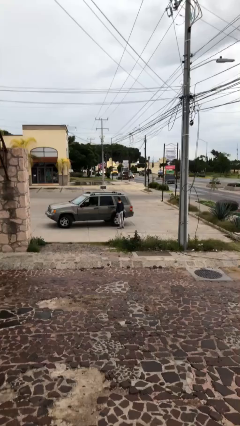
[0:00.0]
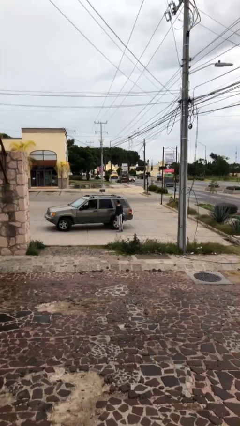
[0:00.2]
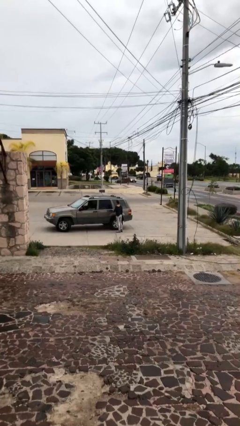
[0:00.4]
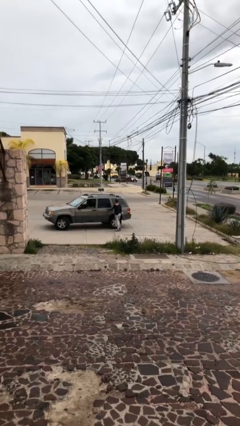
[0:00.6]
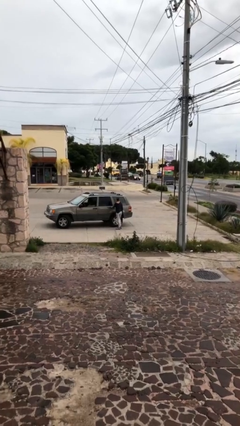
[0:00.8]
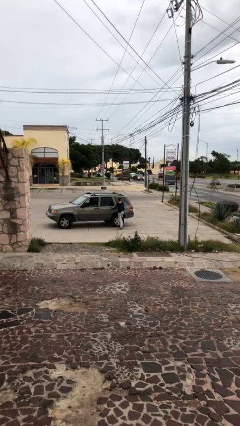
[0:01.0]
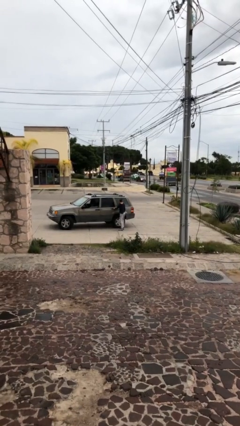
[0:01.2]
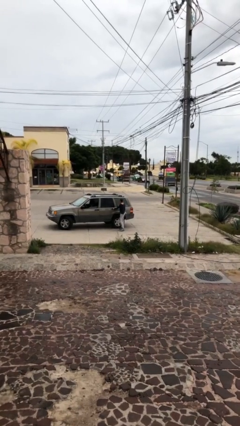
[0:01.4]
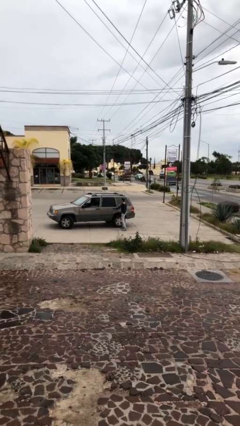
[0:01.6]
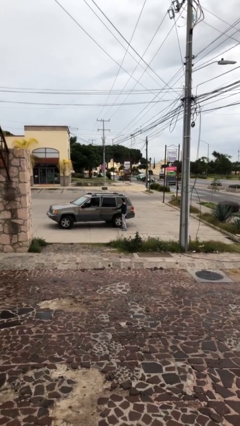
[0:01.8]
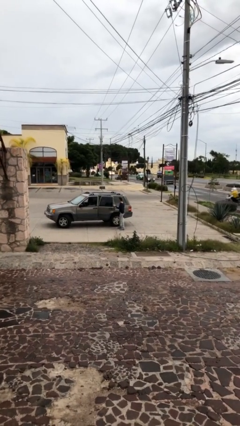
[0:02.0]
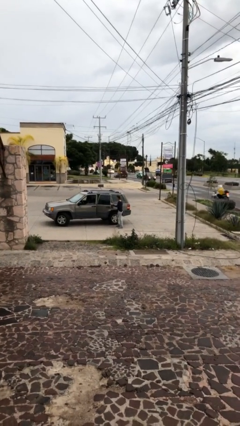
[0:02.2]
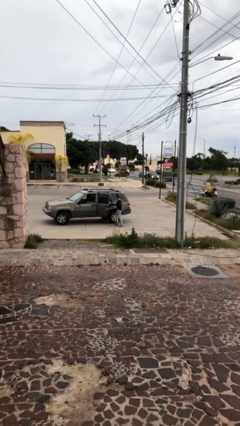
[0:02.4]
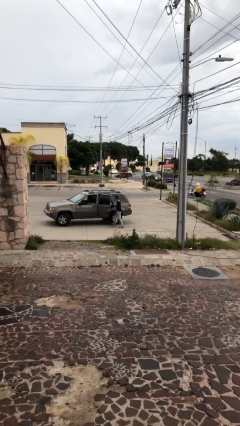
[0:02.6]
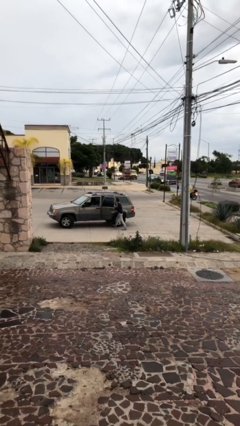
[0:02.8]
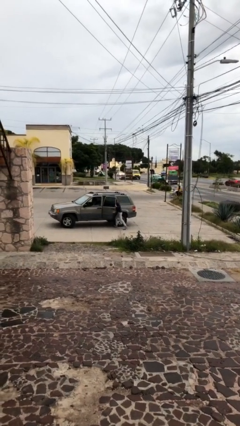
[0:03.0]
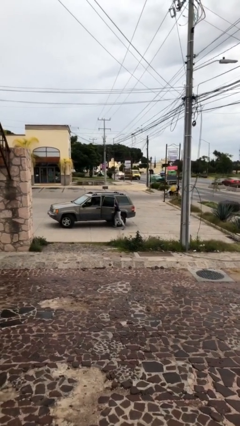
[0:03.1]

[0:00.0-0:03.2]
person opens car door

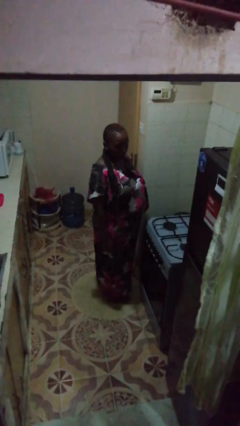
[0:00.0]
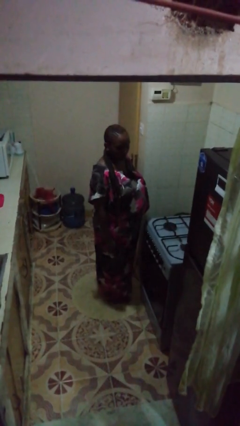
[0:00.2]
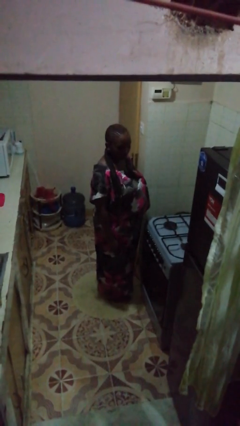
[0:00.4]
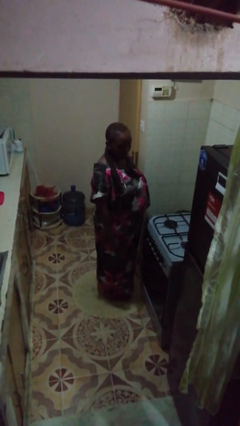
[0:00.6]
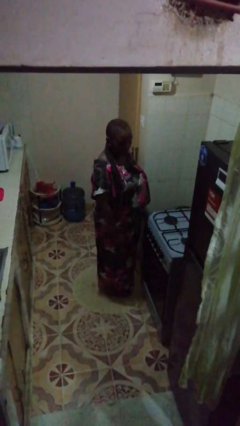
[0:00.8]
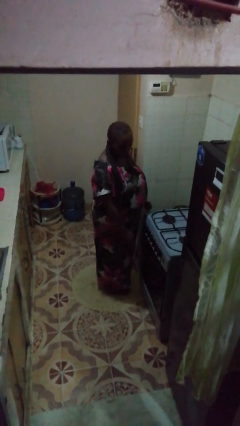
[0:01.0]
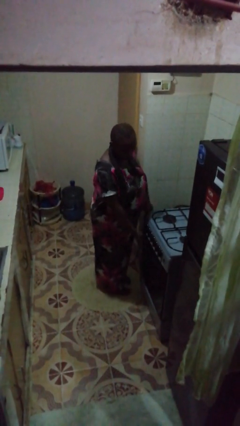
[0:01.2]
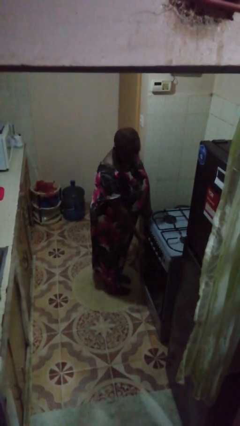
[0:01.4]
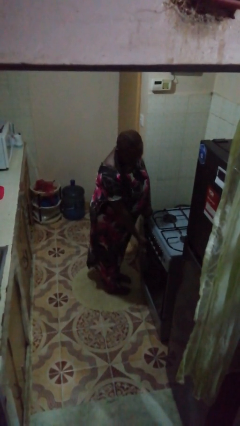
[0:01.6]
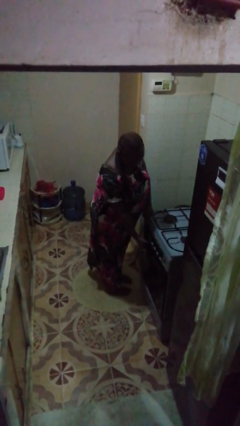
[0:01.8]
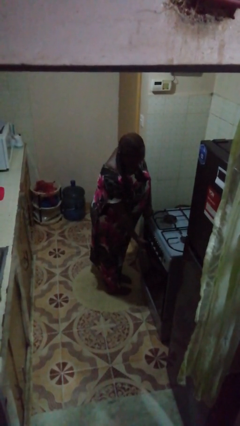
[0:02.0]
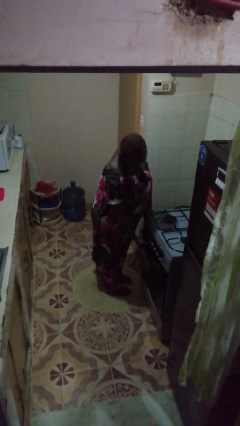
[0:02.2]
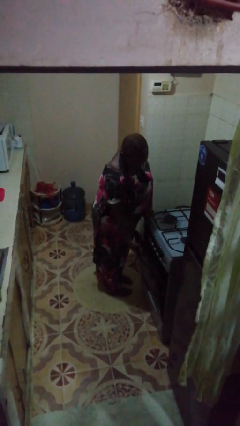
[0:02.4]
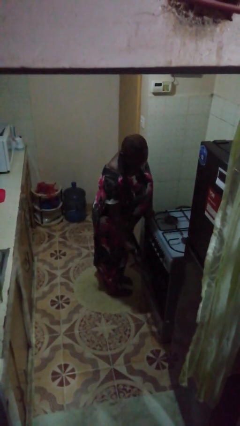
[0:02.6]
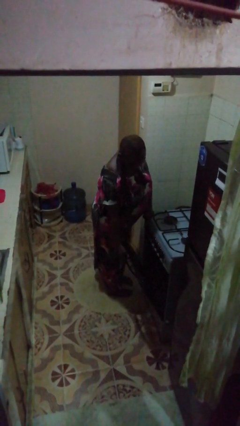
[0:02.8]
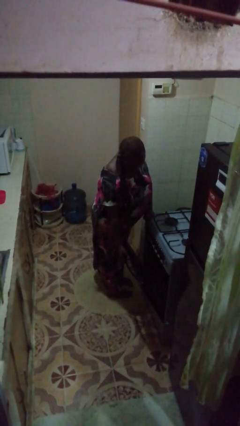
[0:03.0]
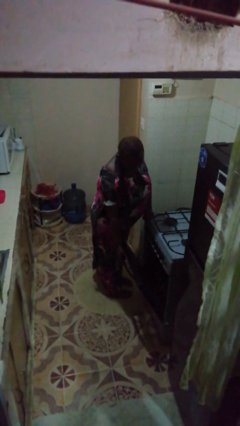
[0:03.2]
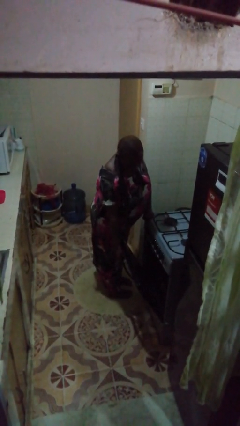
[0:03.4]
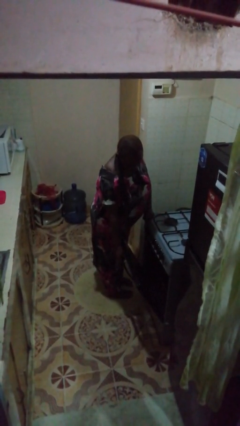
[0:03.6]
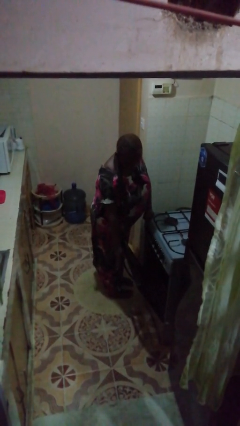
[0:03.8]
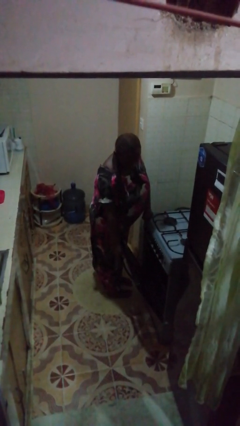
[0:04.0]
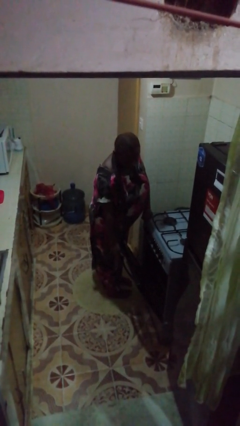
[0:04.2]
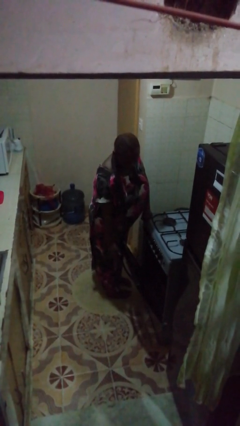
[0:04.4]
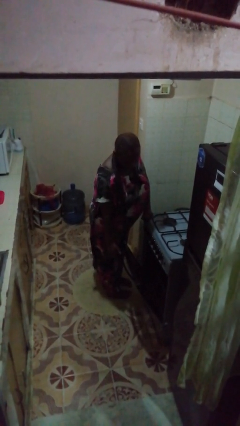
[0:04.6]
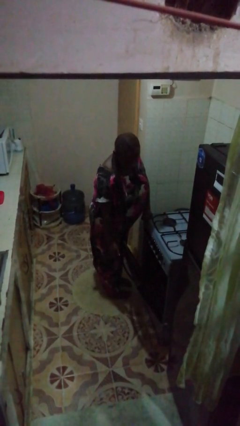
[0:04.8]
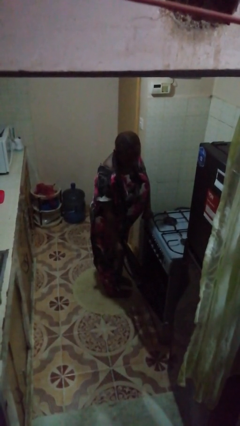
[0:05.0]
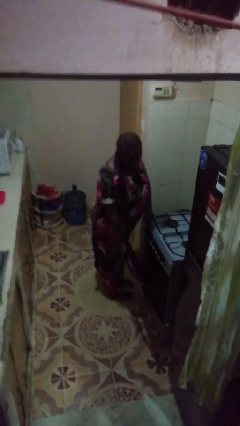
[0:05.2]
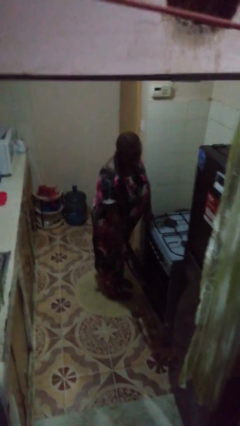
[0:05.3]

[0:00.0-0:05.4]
person opens oven door

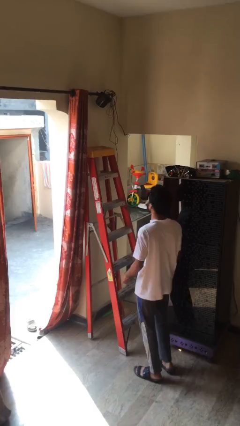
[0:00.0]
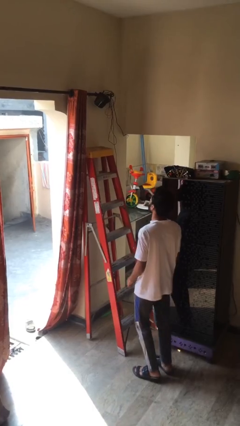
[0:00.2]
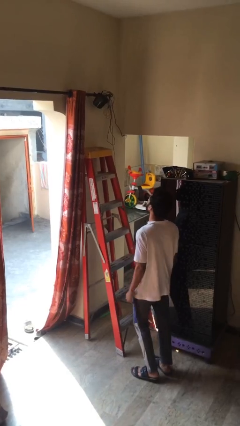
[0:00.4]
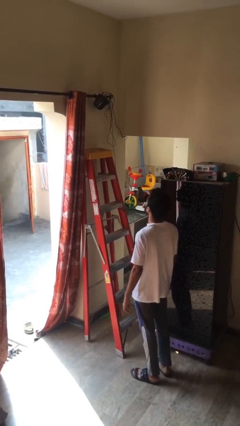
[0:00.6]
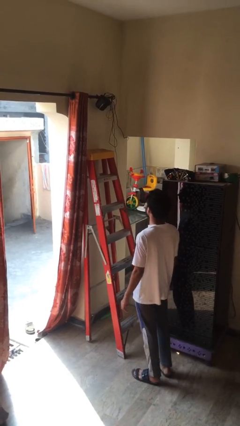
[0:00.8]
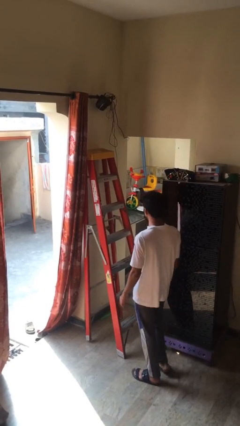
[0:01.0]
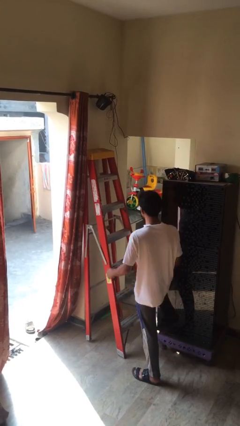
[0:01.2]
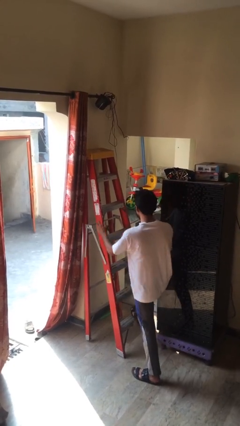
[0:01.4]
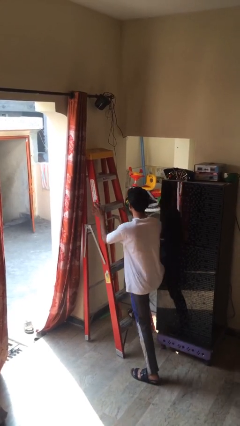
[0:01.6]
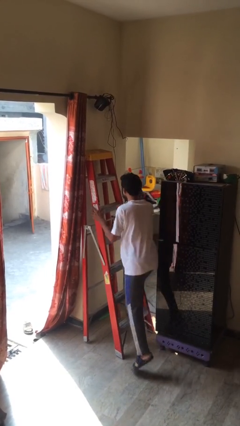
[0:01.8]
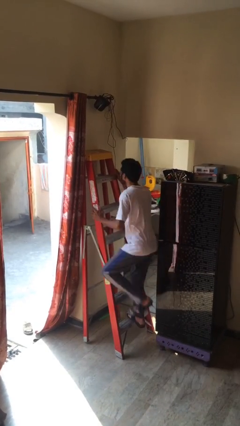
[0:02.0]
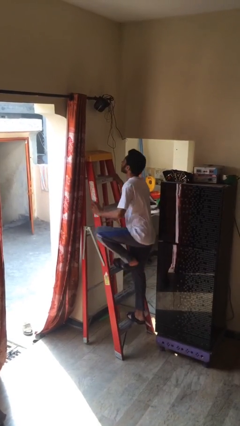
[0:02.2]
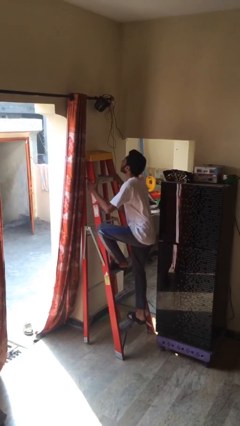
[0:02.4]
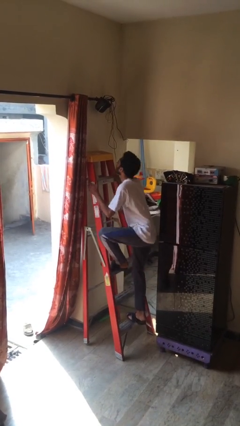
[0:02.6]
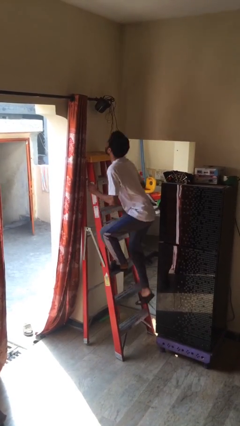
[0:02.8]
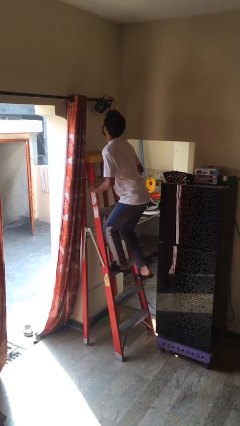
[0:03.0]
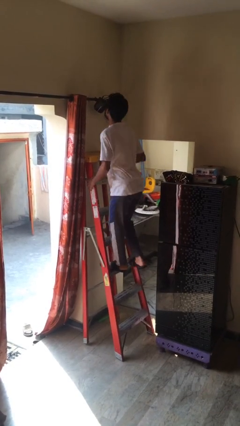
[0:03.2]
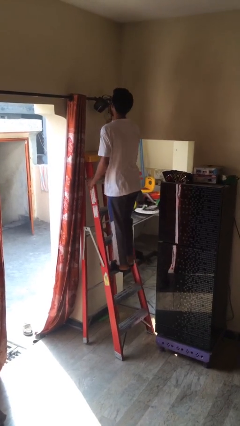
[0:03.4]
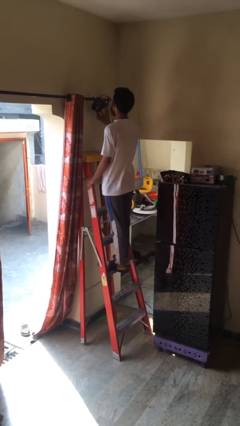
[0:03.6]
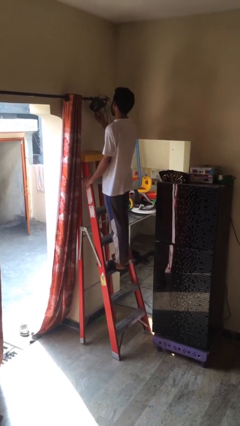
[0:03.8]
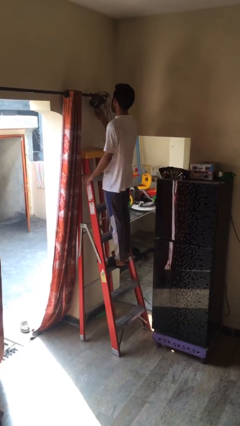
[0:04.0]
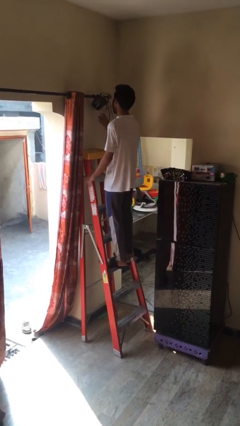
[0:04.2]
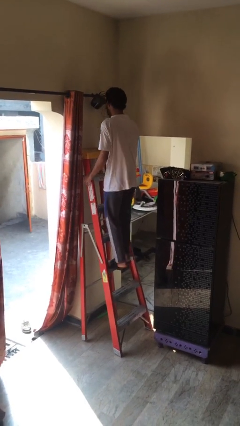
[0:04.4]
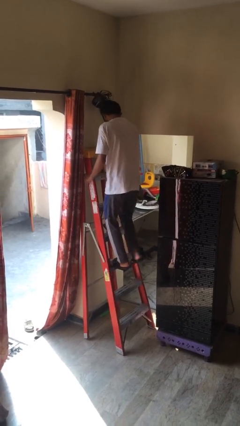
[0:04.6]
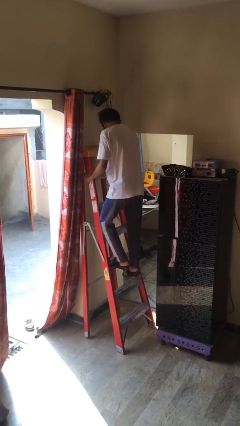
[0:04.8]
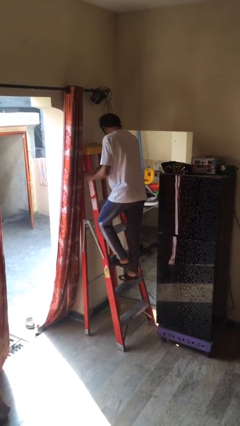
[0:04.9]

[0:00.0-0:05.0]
person climbs up ladder

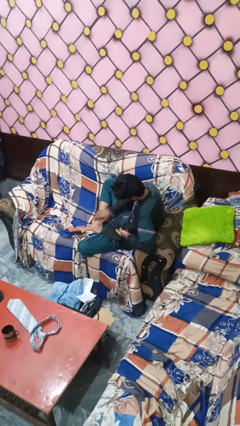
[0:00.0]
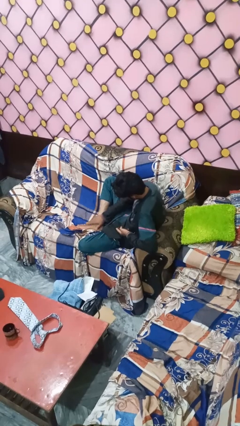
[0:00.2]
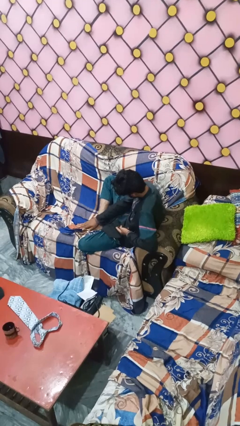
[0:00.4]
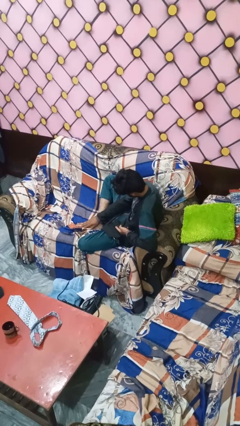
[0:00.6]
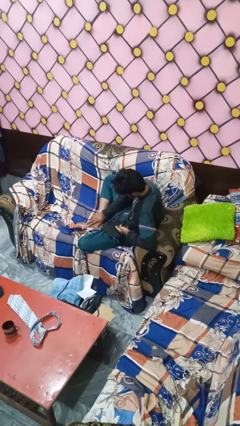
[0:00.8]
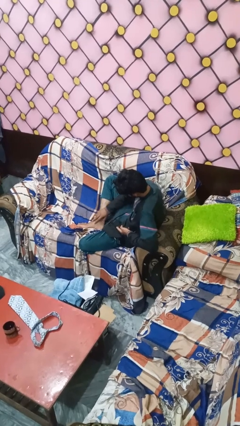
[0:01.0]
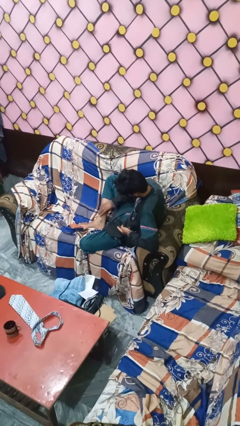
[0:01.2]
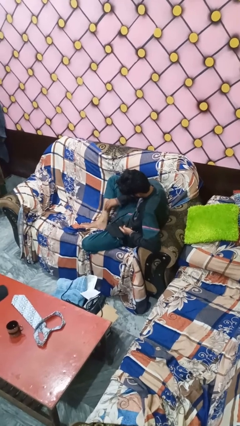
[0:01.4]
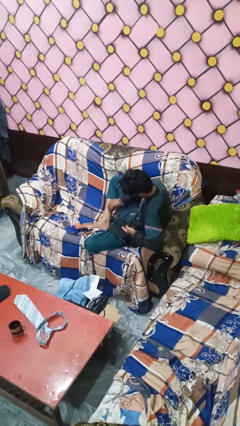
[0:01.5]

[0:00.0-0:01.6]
person rubs foot

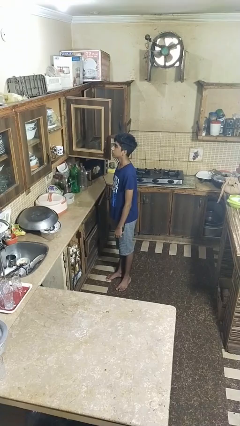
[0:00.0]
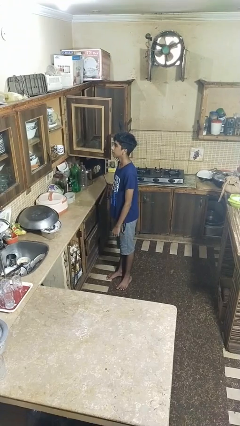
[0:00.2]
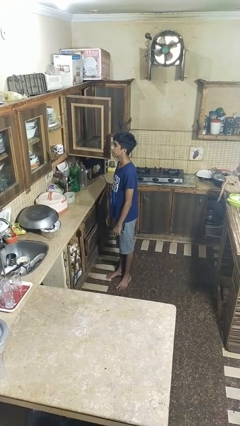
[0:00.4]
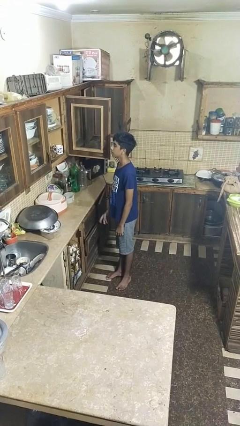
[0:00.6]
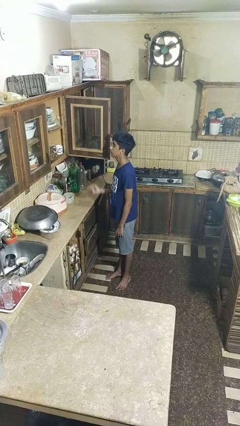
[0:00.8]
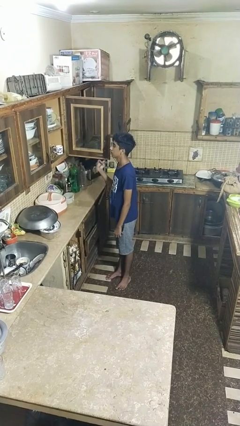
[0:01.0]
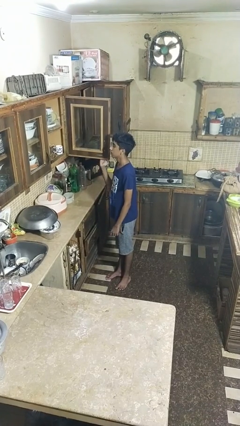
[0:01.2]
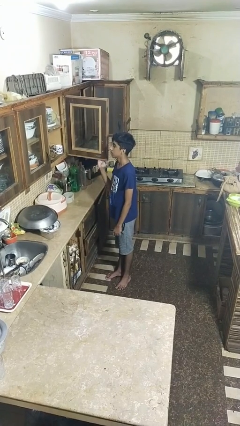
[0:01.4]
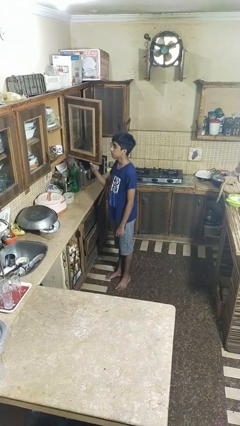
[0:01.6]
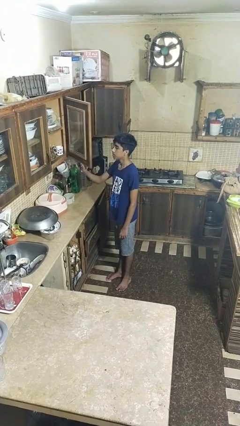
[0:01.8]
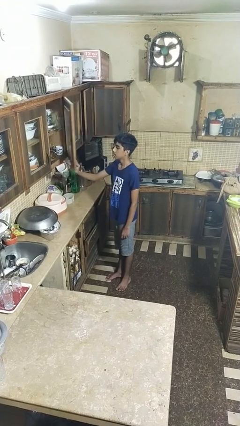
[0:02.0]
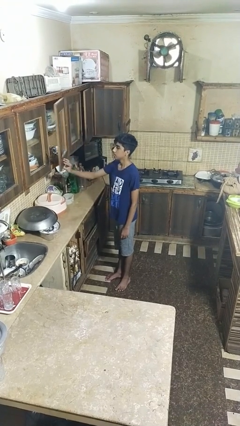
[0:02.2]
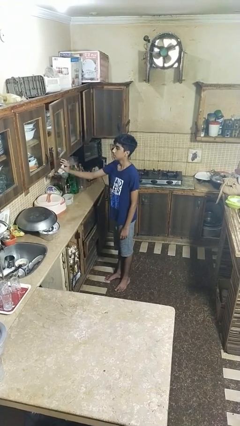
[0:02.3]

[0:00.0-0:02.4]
person closes cabinet
